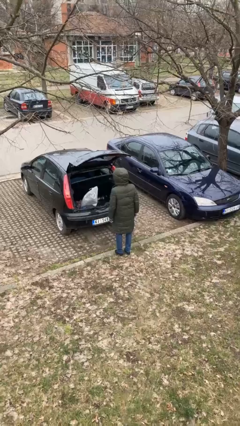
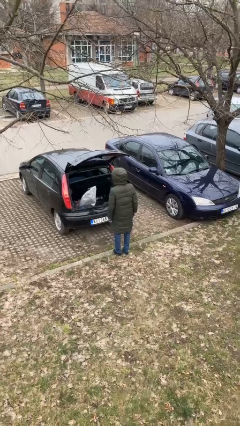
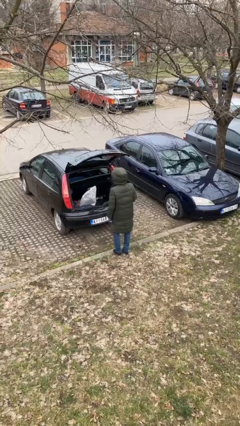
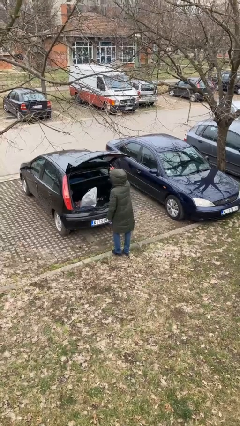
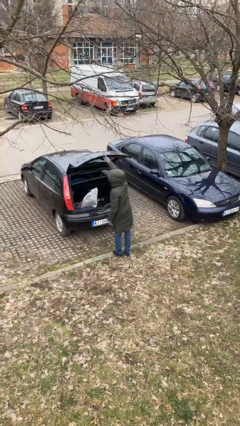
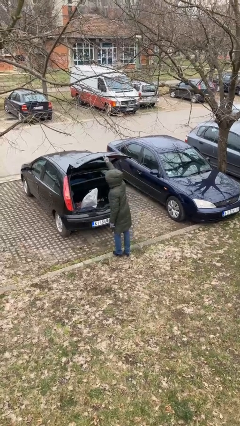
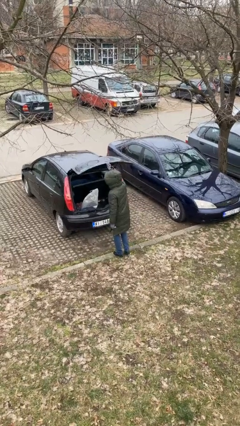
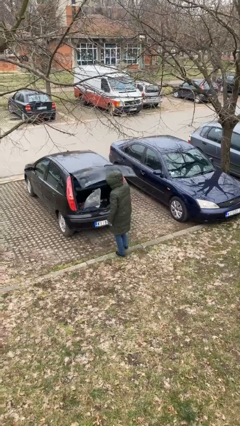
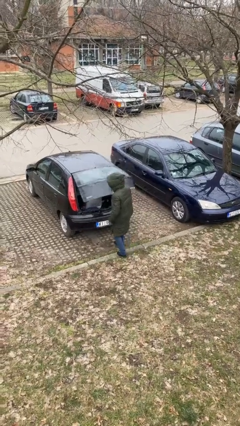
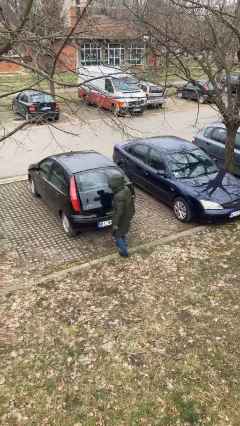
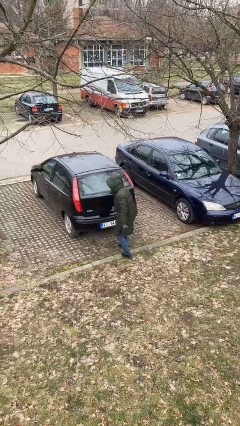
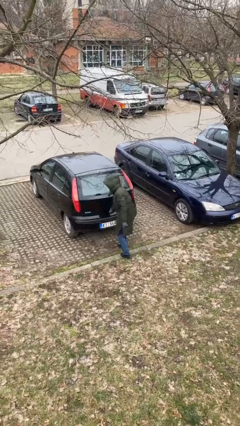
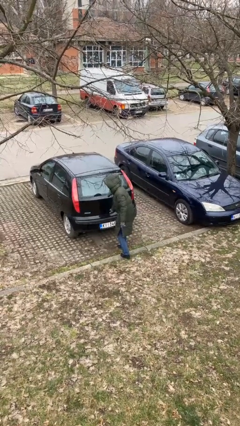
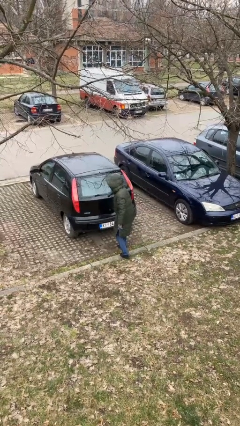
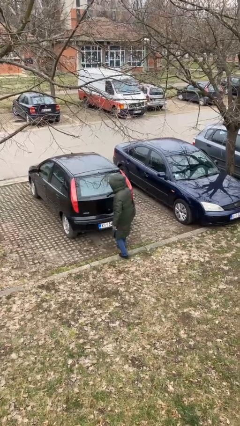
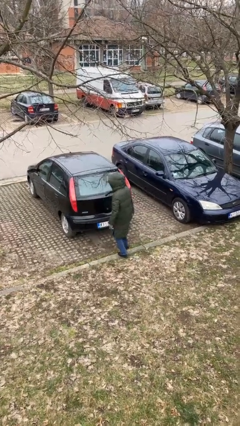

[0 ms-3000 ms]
person closes car trunk

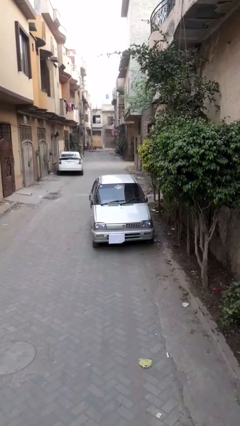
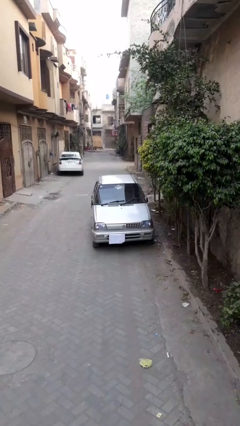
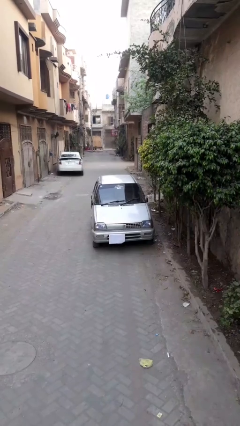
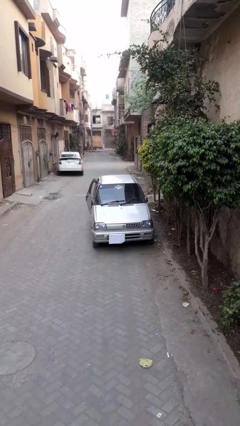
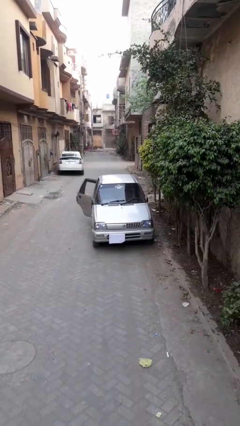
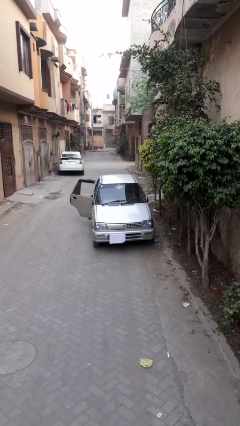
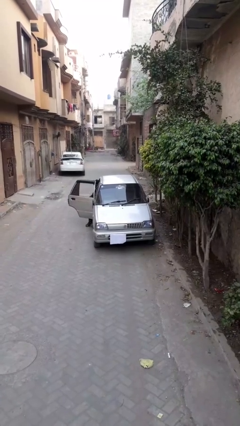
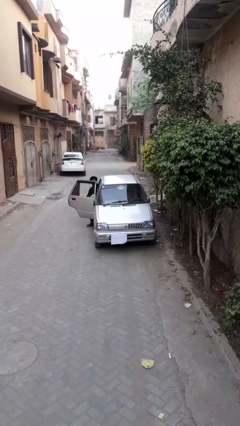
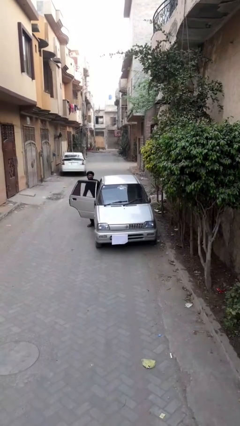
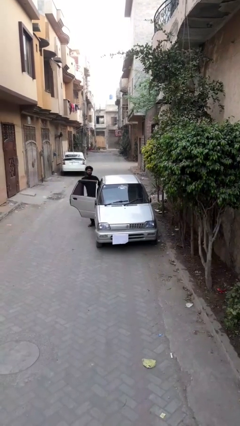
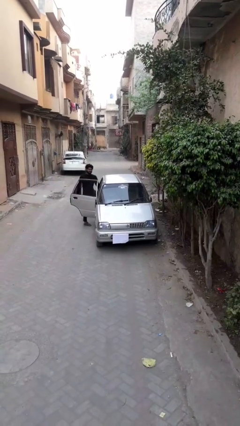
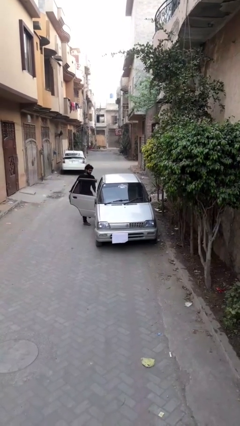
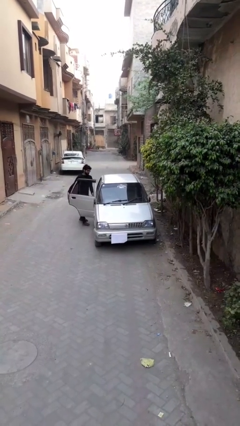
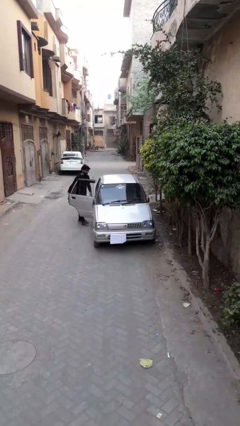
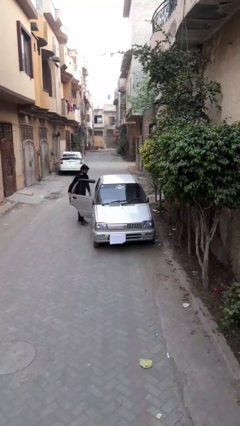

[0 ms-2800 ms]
car drops off person

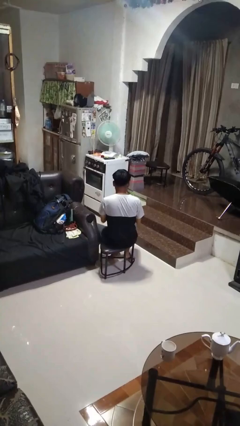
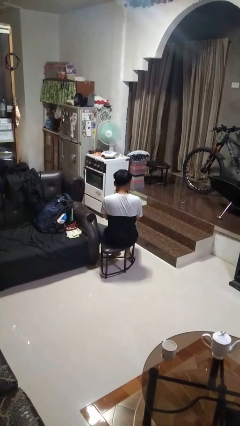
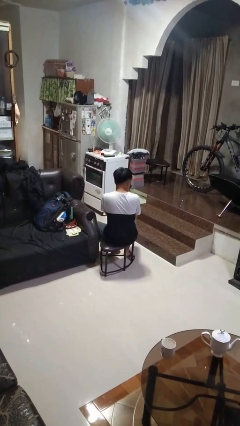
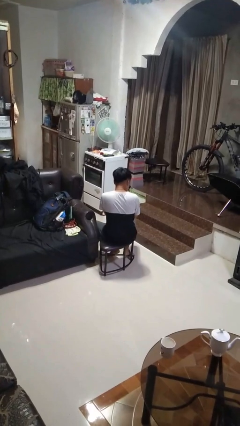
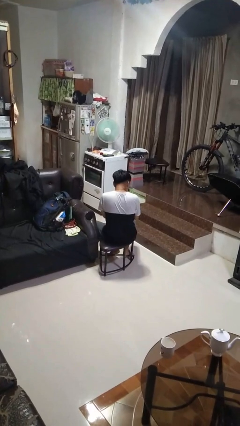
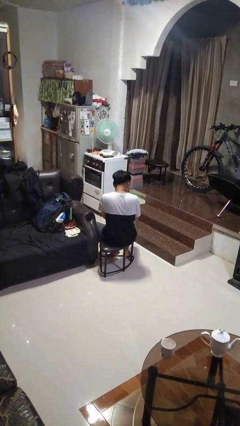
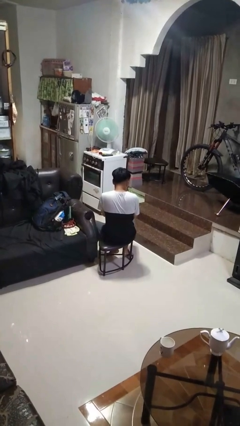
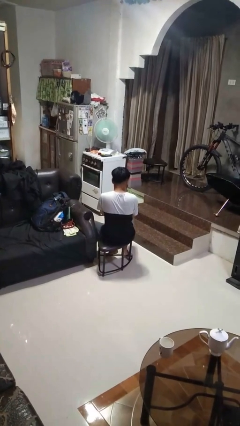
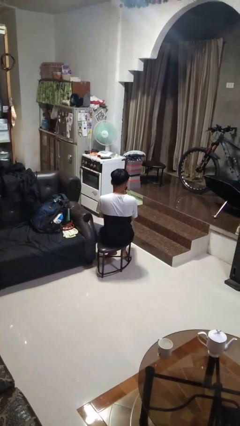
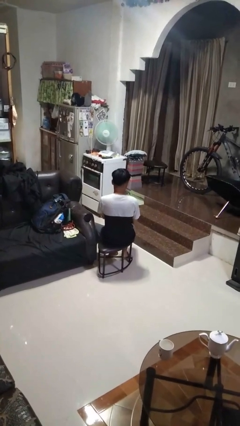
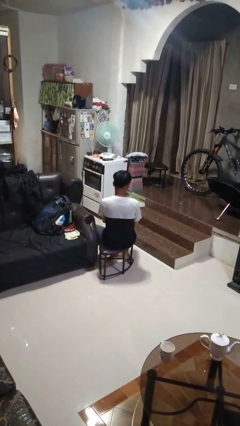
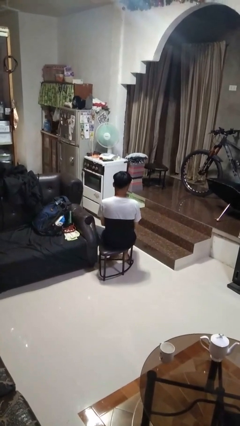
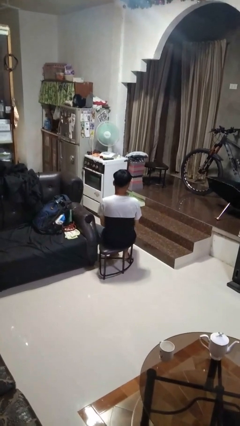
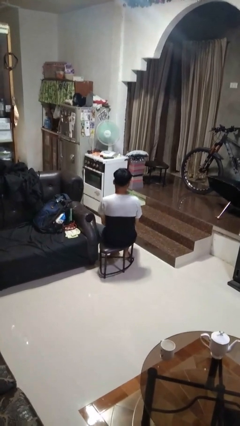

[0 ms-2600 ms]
person blows nose

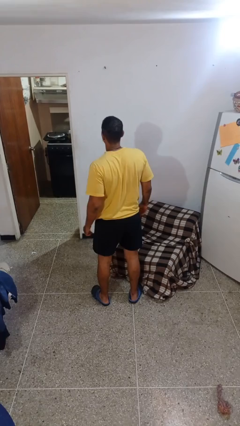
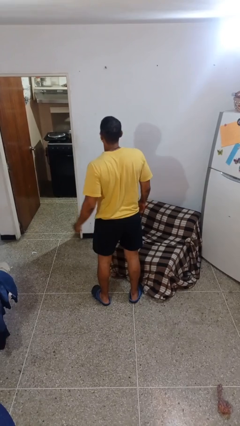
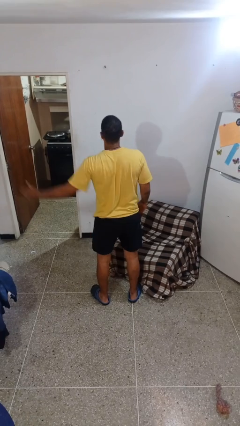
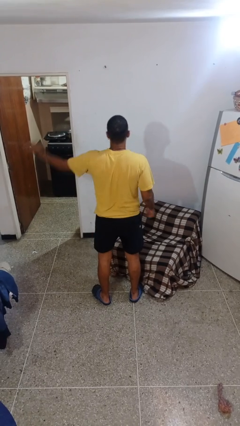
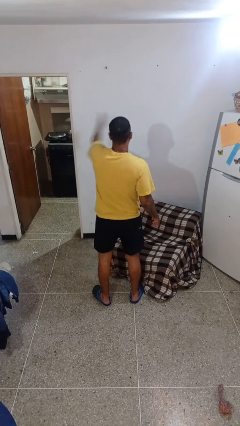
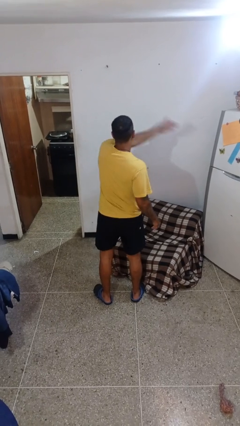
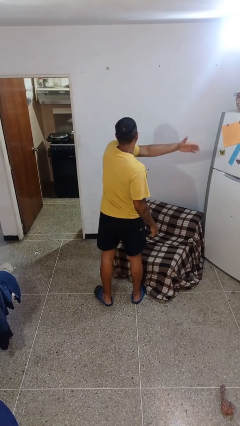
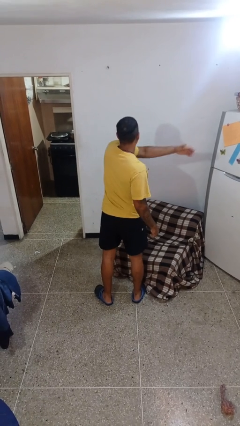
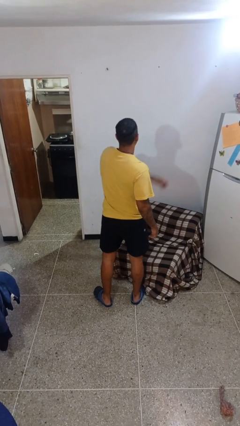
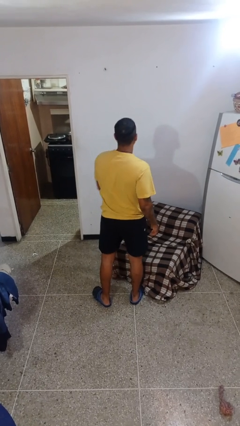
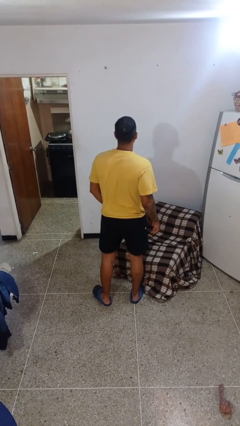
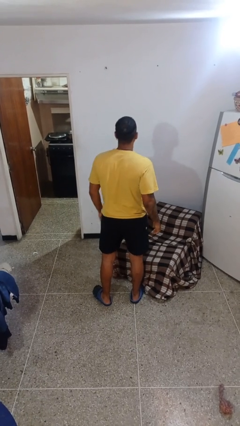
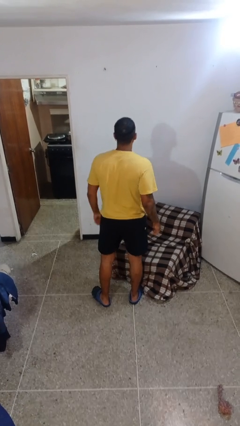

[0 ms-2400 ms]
person gestures swipe right

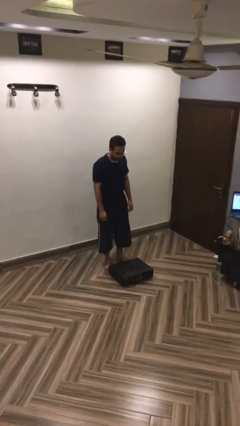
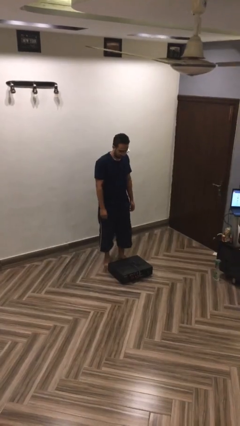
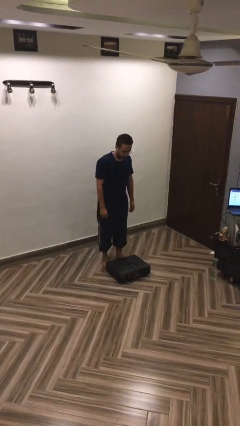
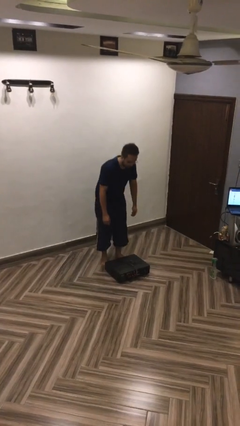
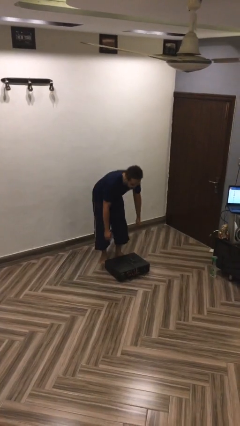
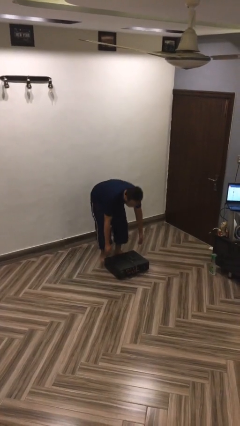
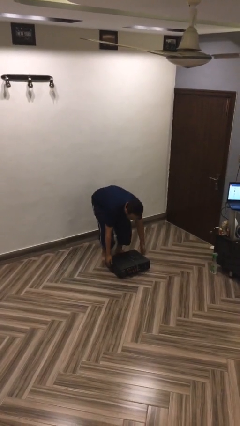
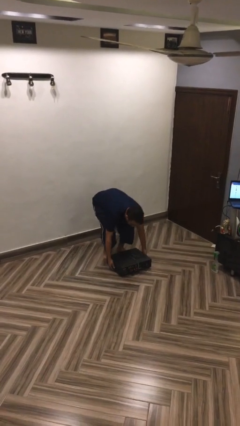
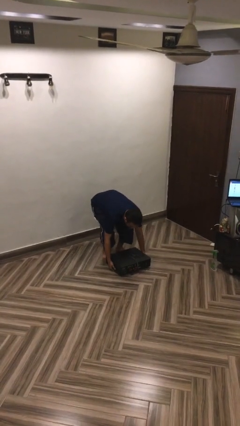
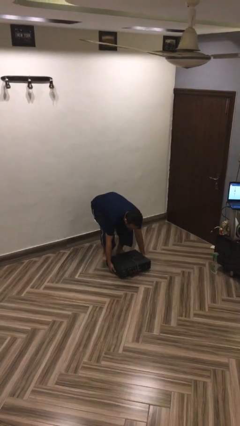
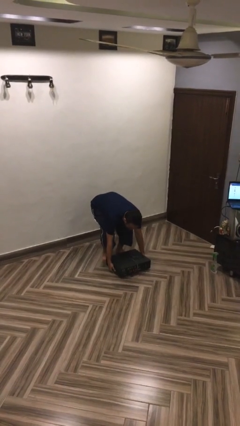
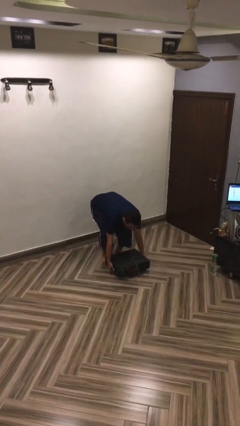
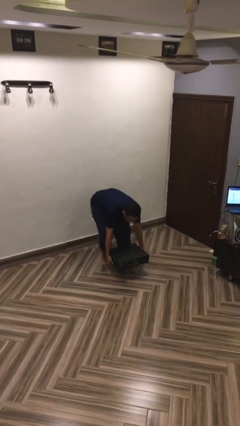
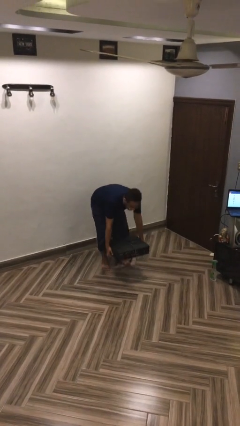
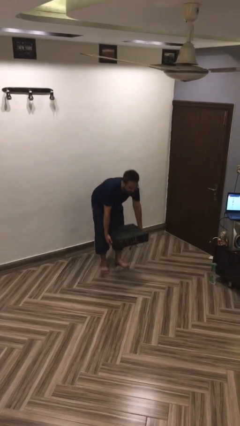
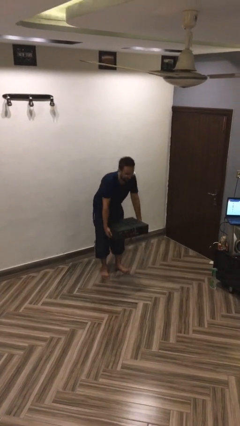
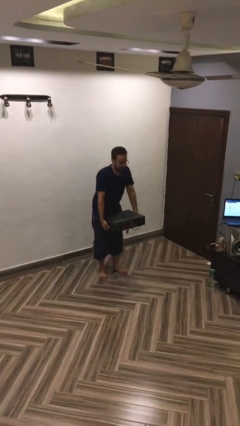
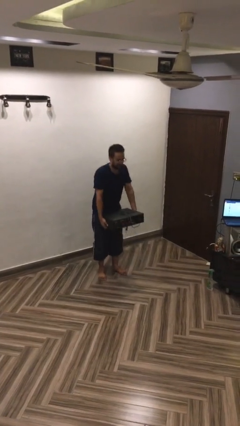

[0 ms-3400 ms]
person picks up object from floor

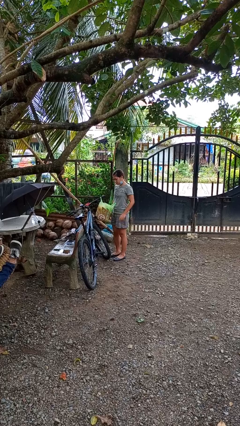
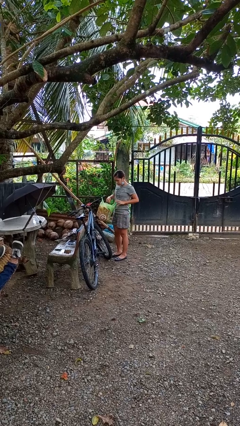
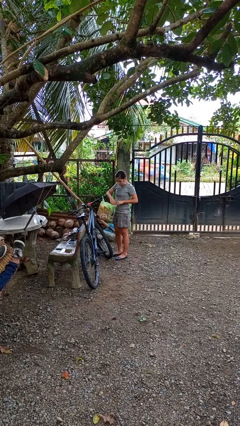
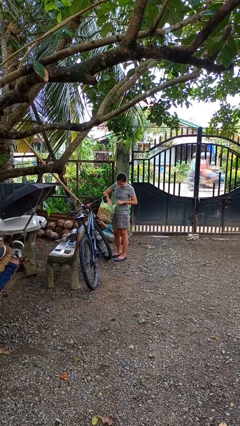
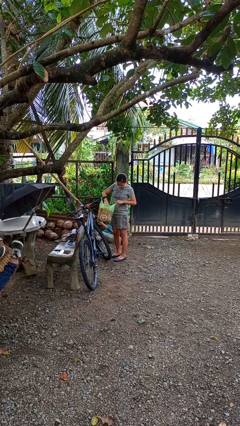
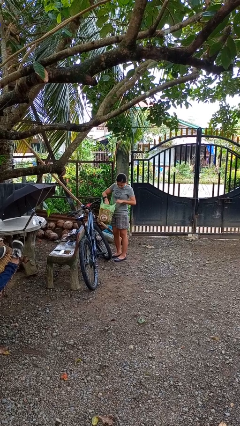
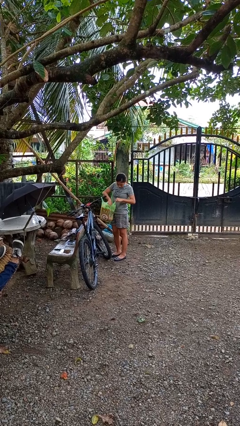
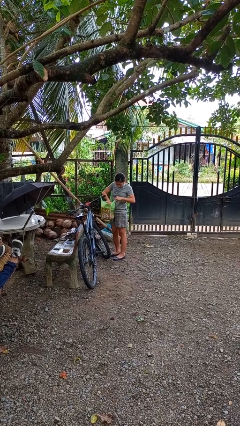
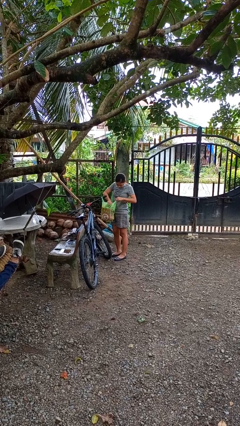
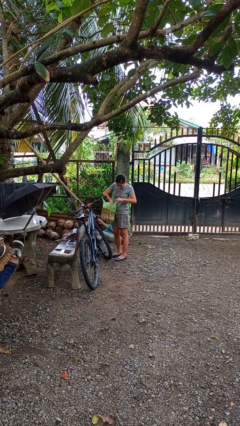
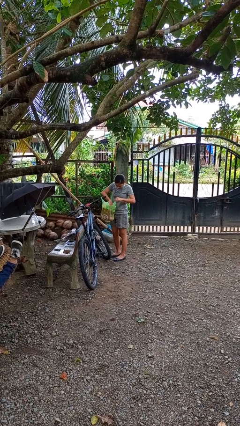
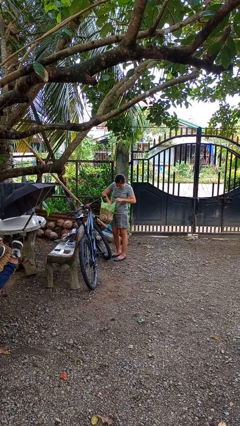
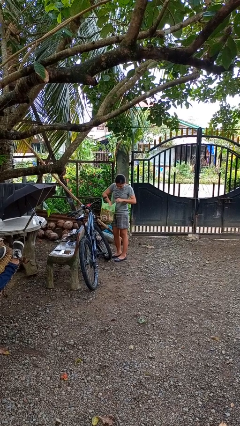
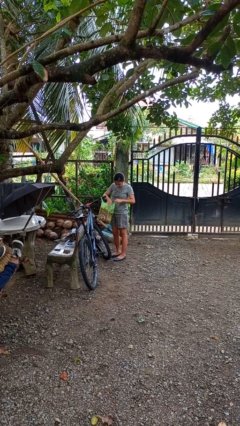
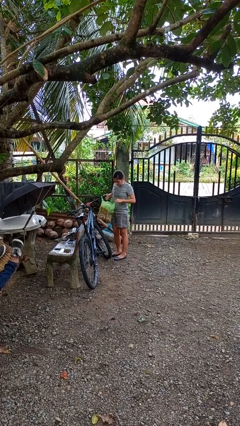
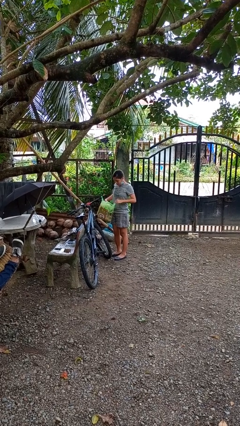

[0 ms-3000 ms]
person searches in bag

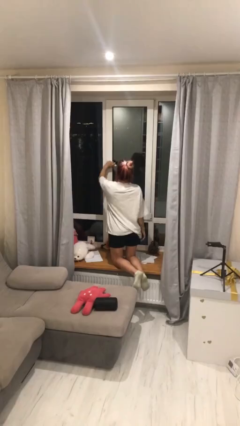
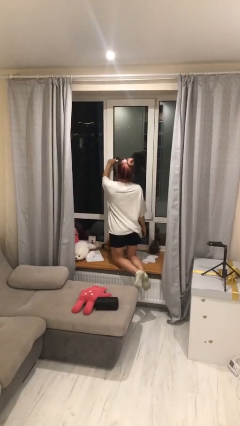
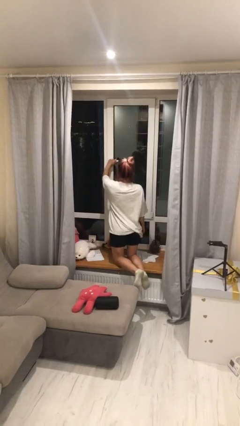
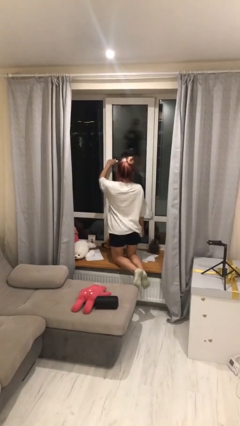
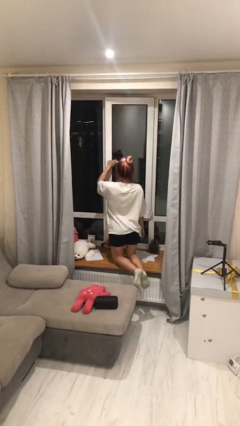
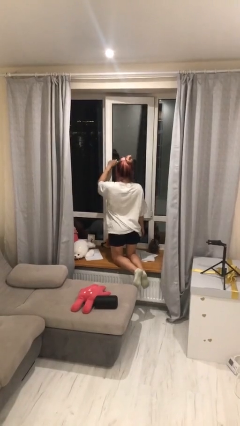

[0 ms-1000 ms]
person opens home window
